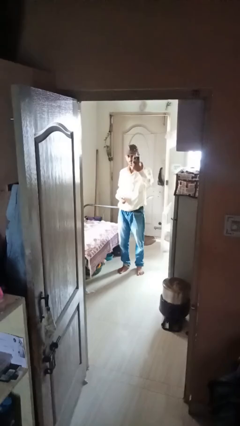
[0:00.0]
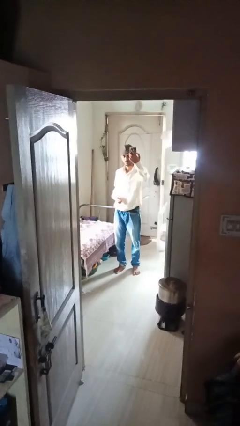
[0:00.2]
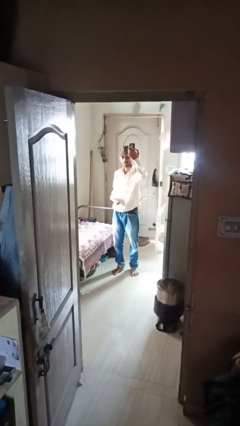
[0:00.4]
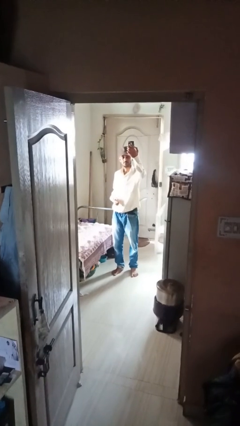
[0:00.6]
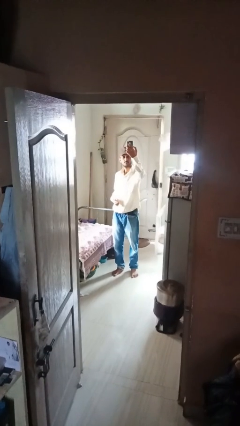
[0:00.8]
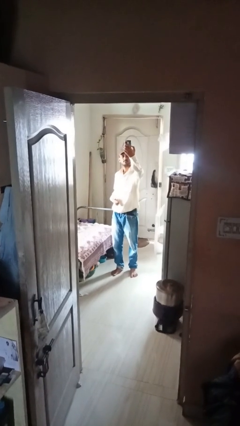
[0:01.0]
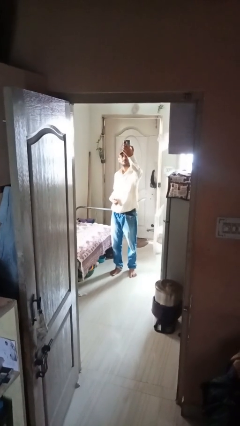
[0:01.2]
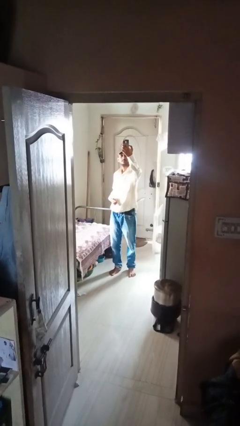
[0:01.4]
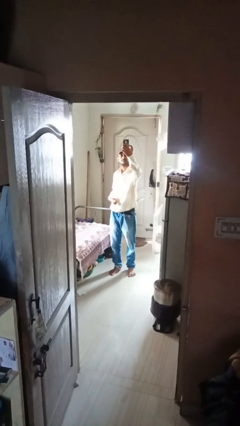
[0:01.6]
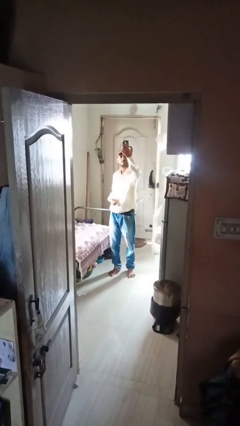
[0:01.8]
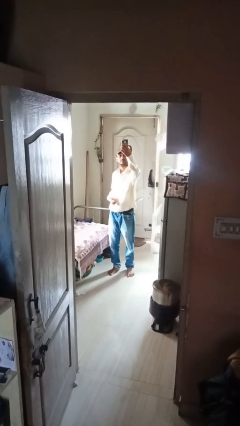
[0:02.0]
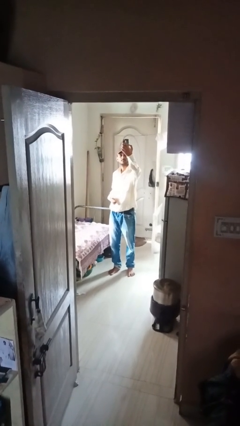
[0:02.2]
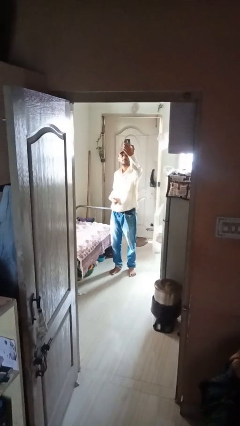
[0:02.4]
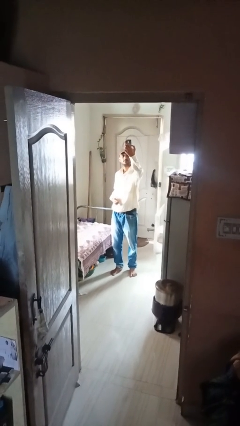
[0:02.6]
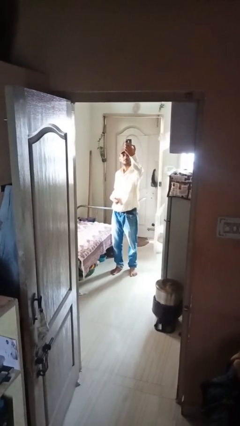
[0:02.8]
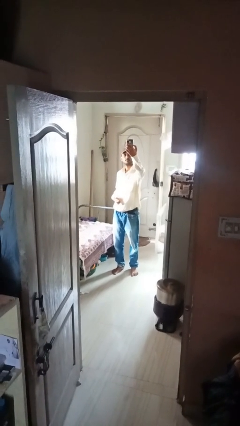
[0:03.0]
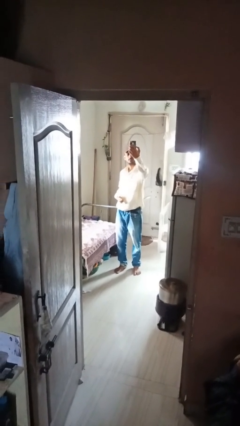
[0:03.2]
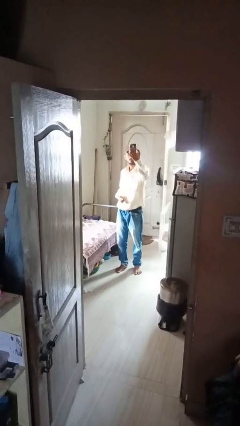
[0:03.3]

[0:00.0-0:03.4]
person takes selfie

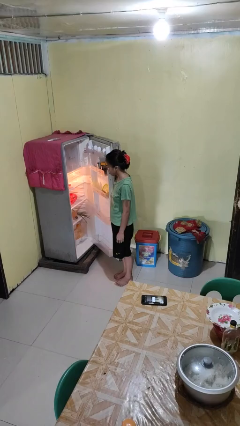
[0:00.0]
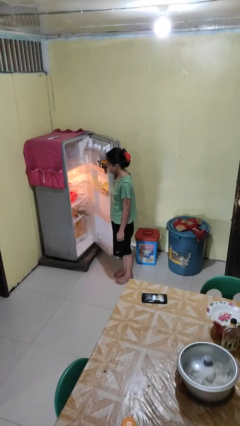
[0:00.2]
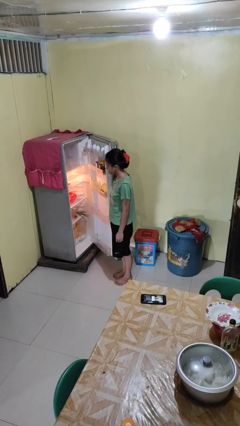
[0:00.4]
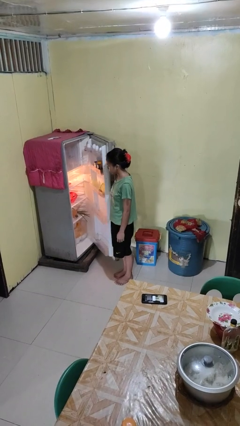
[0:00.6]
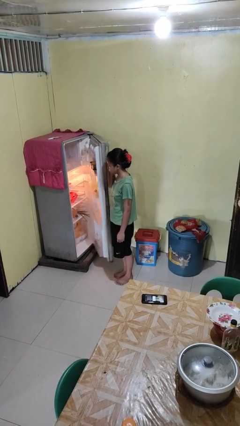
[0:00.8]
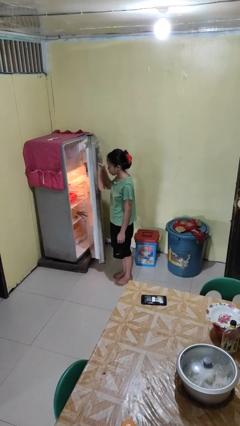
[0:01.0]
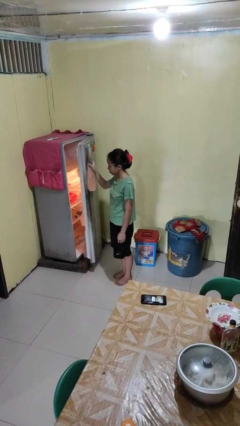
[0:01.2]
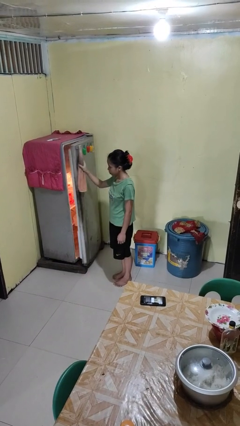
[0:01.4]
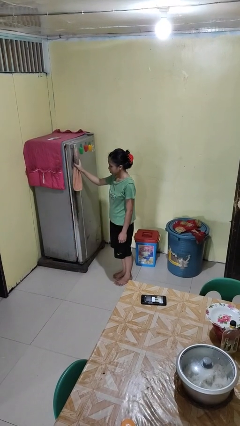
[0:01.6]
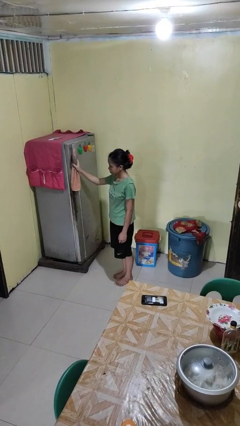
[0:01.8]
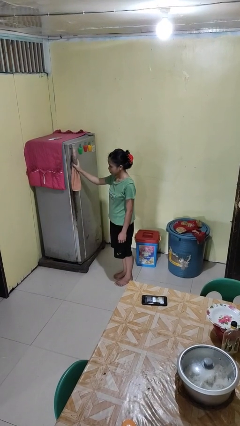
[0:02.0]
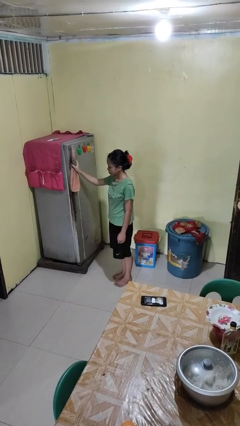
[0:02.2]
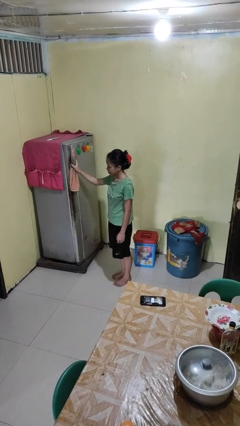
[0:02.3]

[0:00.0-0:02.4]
person closes refrigerator

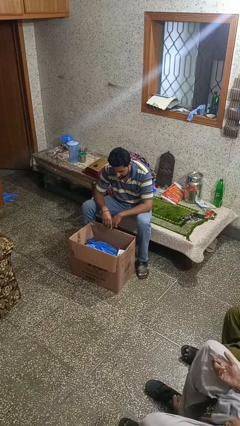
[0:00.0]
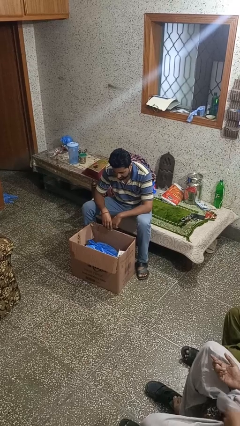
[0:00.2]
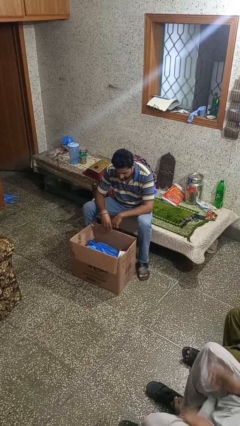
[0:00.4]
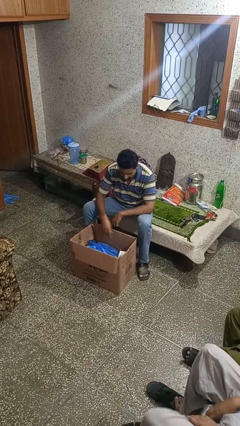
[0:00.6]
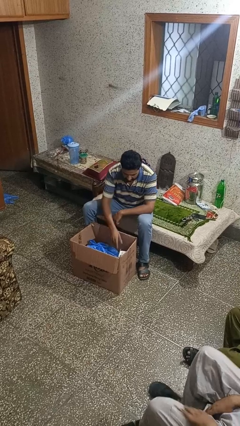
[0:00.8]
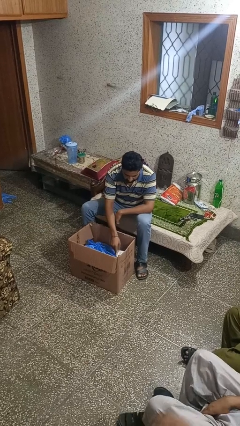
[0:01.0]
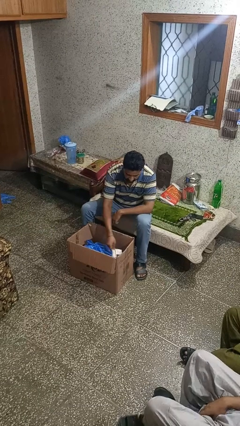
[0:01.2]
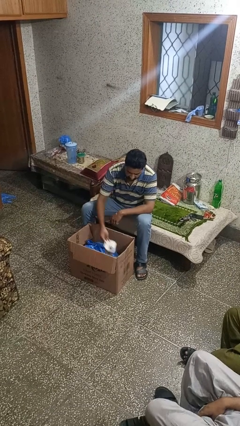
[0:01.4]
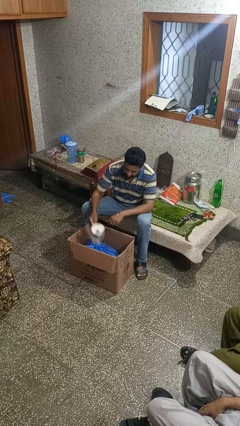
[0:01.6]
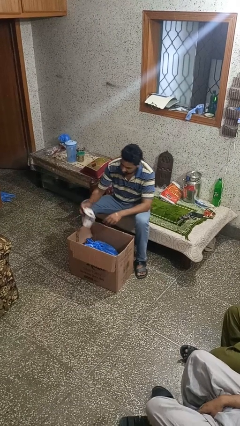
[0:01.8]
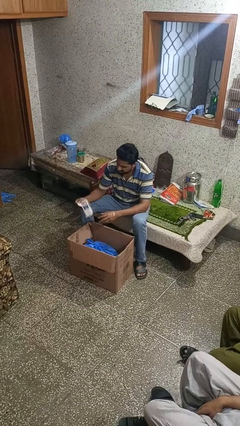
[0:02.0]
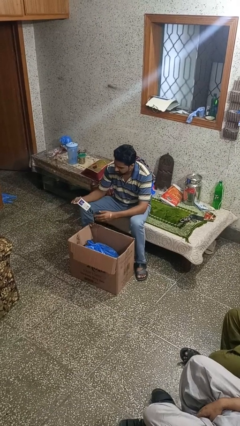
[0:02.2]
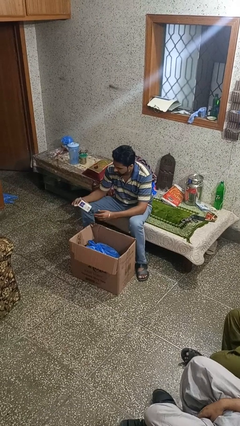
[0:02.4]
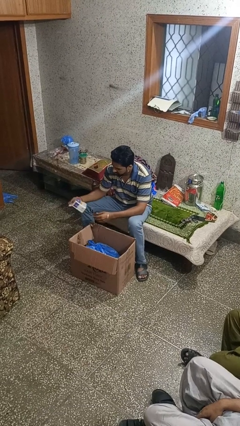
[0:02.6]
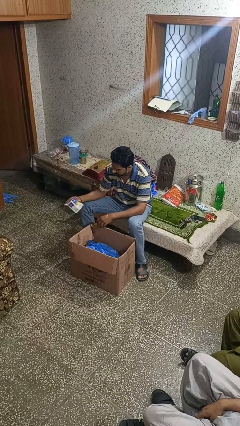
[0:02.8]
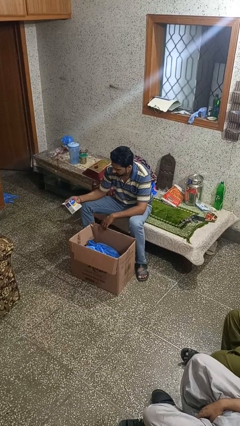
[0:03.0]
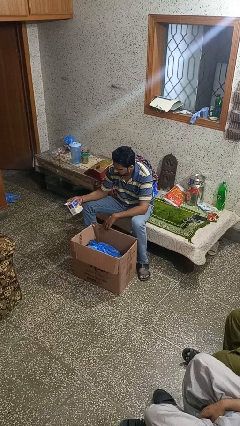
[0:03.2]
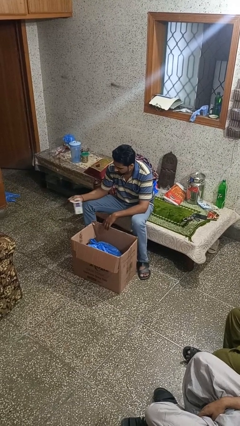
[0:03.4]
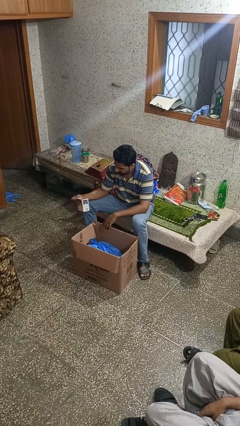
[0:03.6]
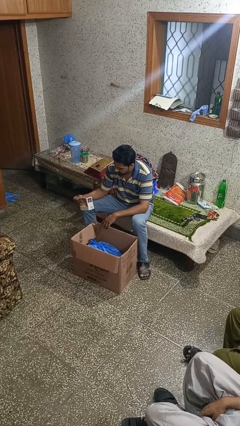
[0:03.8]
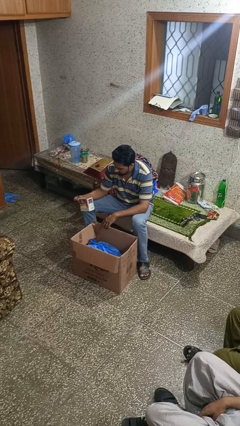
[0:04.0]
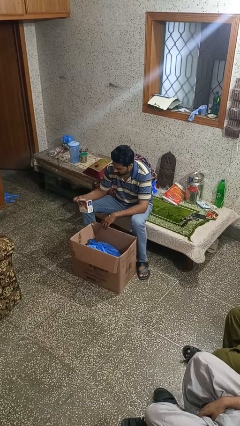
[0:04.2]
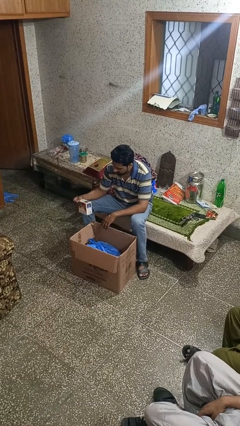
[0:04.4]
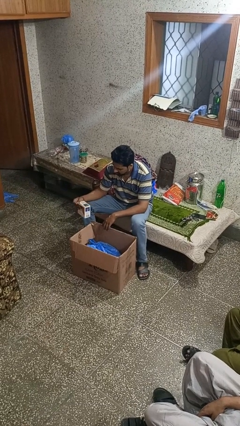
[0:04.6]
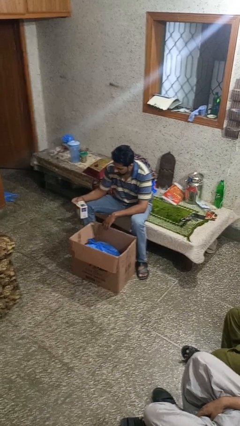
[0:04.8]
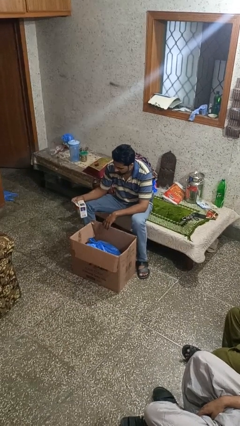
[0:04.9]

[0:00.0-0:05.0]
person takes object from box

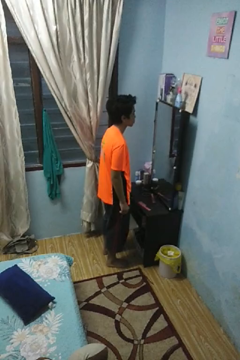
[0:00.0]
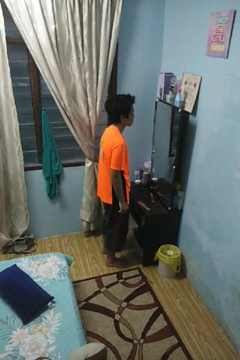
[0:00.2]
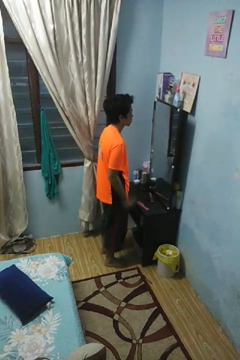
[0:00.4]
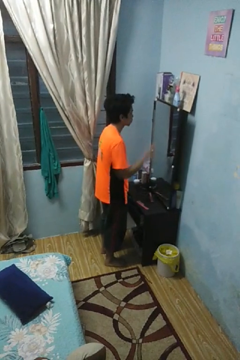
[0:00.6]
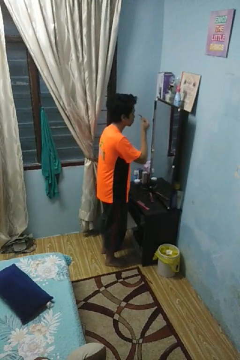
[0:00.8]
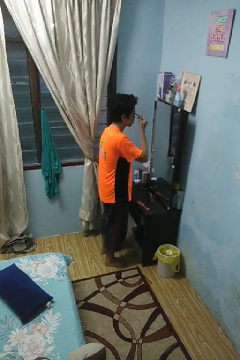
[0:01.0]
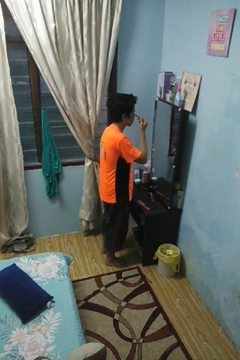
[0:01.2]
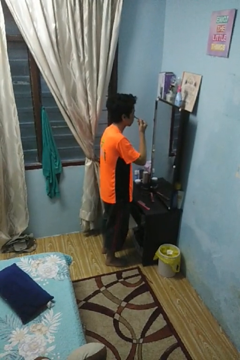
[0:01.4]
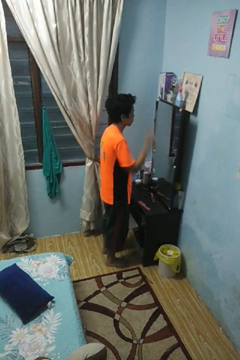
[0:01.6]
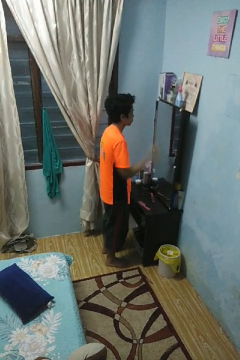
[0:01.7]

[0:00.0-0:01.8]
person applies eye makeup

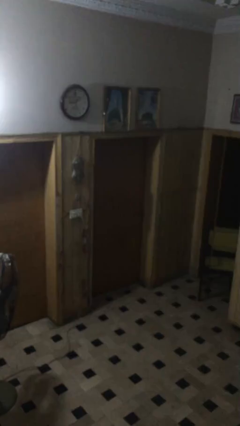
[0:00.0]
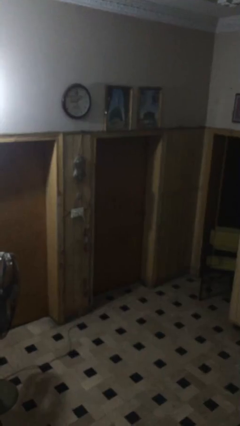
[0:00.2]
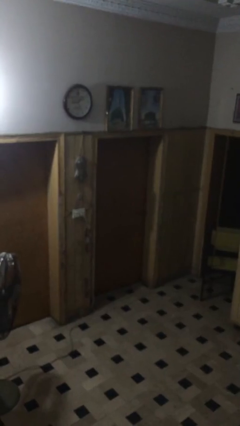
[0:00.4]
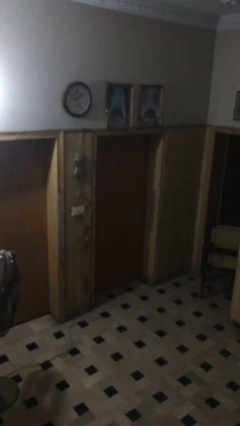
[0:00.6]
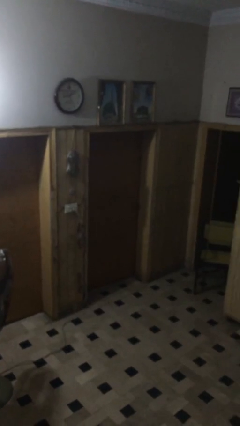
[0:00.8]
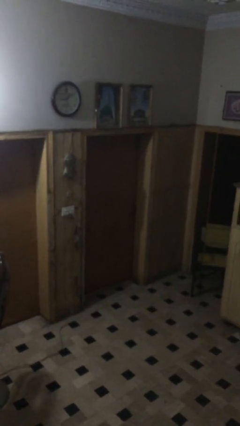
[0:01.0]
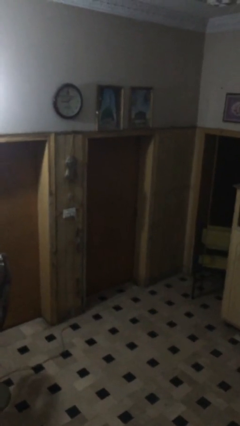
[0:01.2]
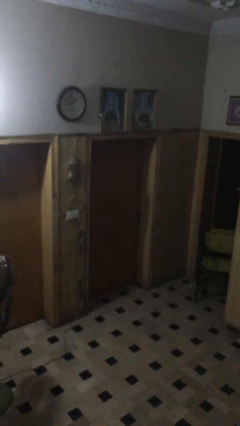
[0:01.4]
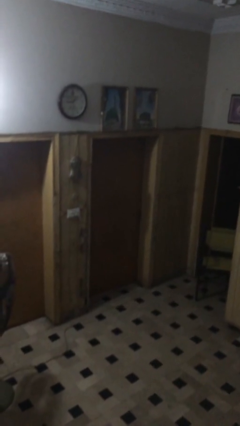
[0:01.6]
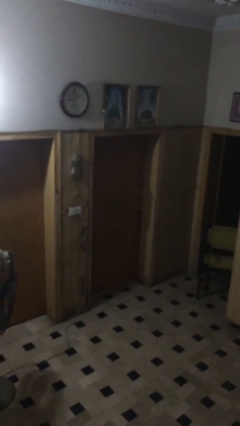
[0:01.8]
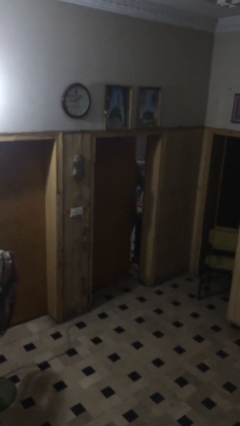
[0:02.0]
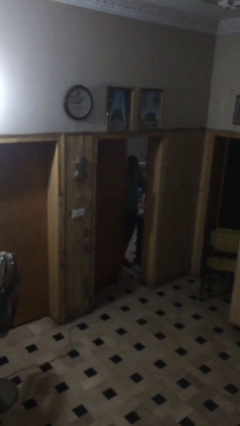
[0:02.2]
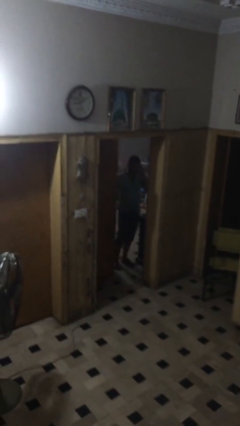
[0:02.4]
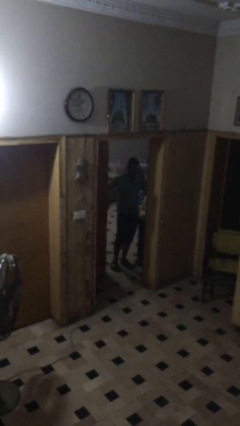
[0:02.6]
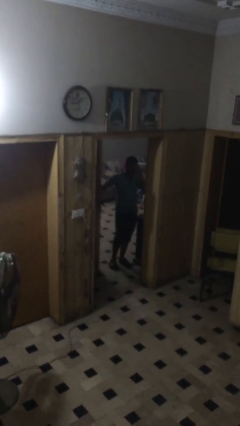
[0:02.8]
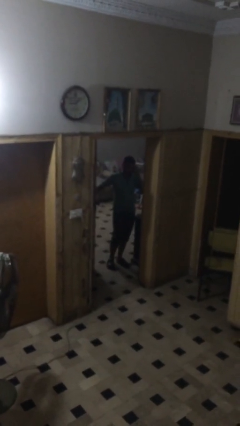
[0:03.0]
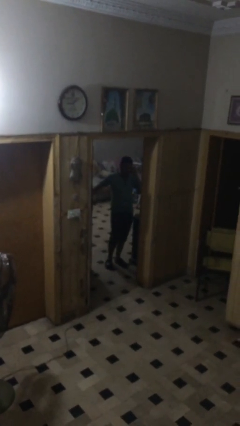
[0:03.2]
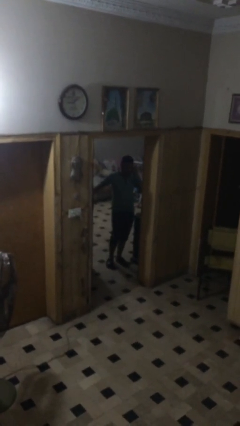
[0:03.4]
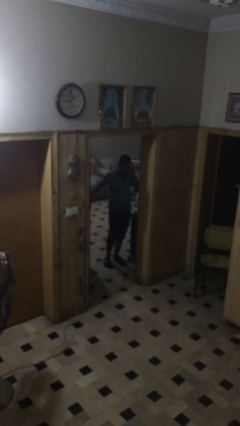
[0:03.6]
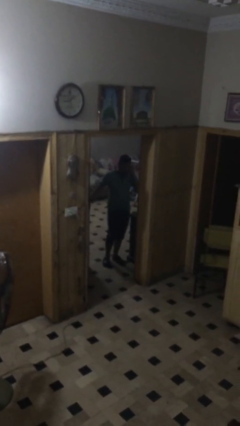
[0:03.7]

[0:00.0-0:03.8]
person opens facility door

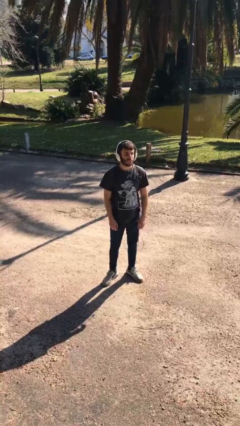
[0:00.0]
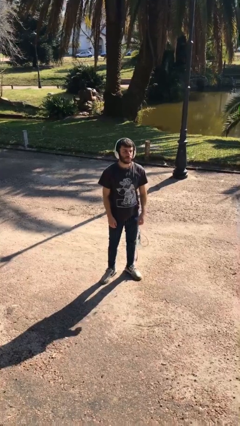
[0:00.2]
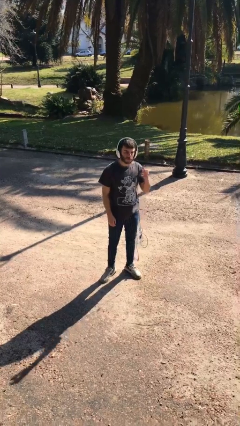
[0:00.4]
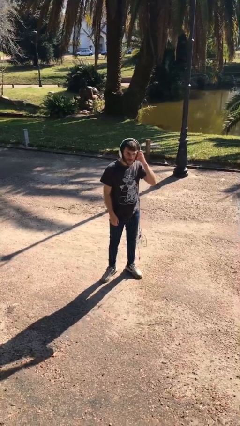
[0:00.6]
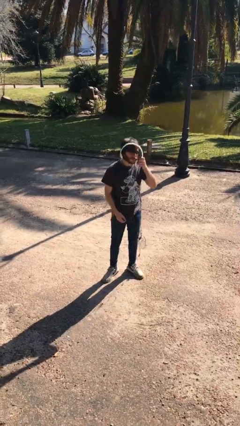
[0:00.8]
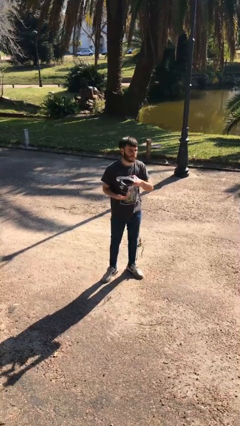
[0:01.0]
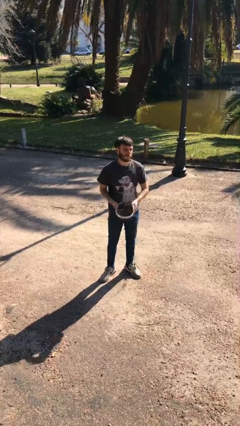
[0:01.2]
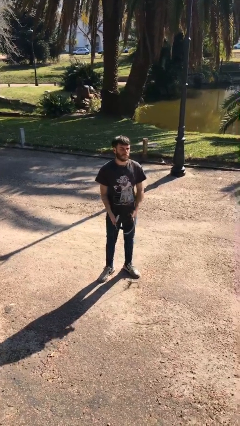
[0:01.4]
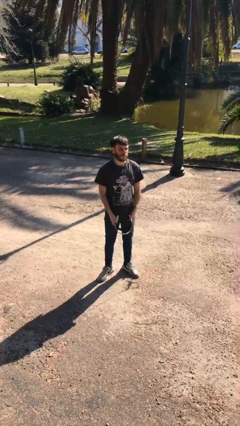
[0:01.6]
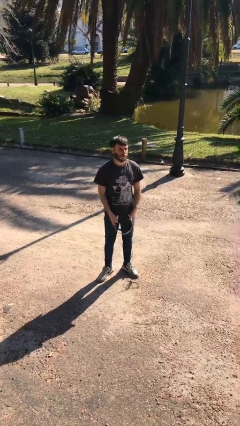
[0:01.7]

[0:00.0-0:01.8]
person takes off headphones
